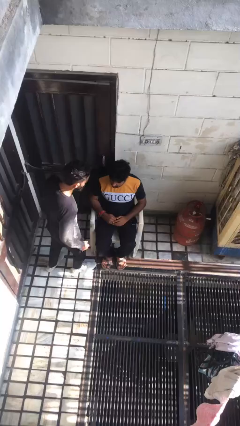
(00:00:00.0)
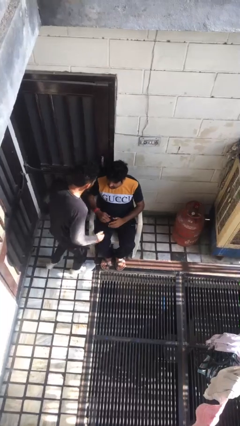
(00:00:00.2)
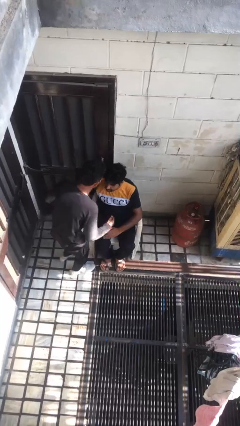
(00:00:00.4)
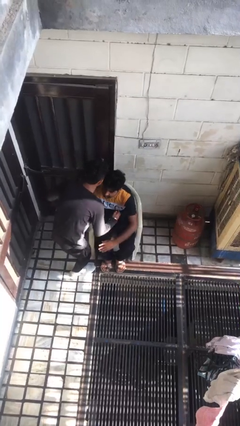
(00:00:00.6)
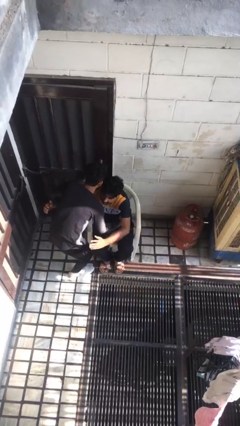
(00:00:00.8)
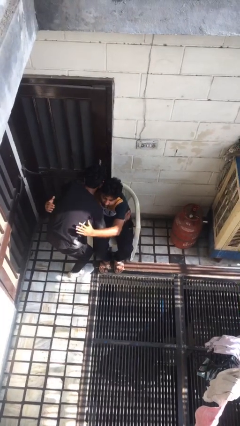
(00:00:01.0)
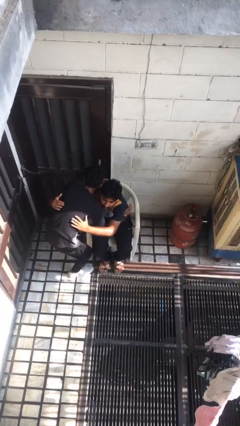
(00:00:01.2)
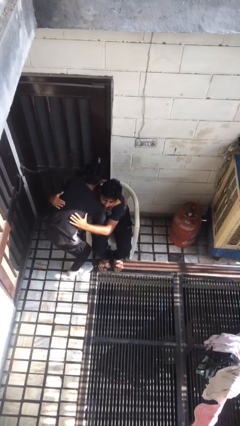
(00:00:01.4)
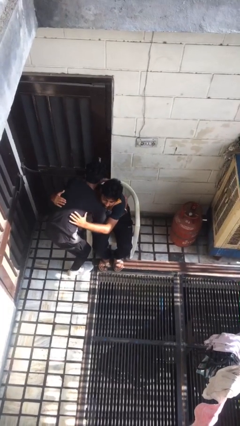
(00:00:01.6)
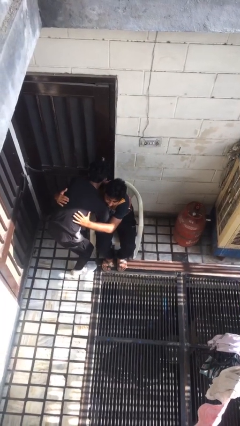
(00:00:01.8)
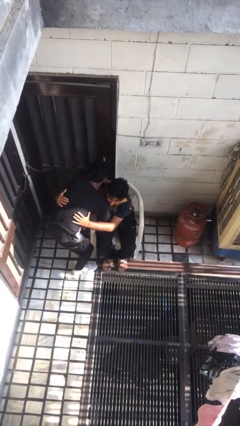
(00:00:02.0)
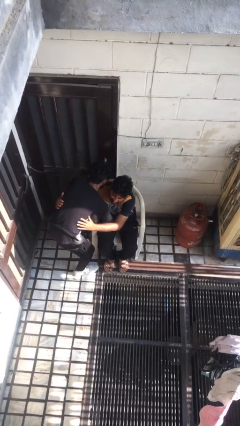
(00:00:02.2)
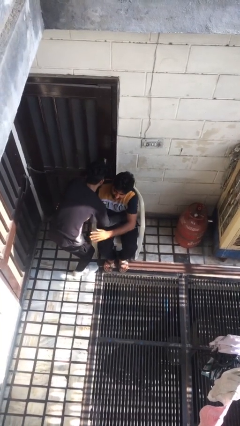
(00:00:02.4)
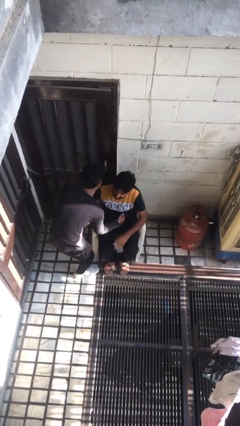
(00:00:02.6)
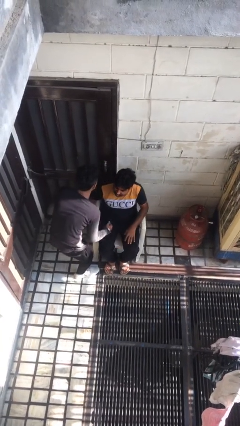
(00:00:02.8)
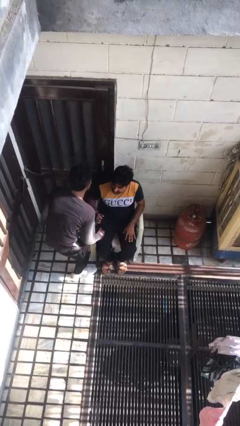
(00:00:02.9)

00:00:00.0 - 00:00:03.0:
person embraces person

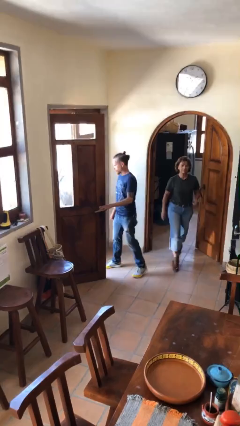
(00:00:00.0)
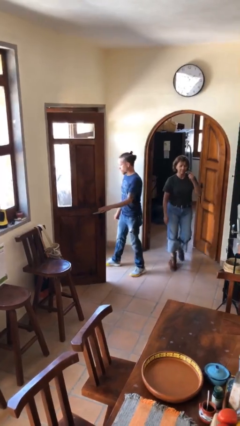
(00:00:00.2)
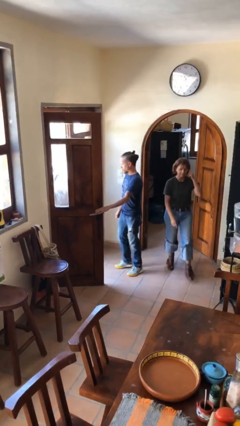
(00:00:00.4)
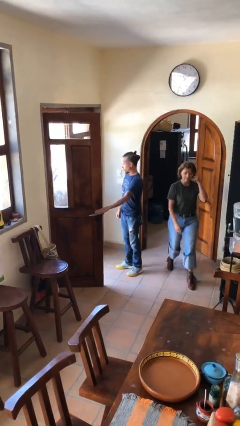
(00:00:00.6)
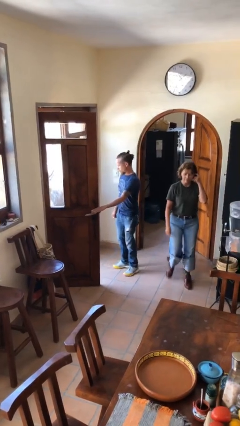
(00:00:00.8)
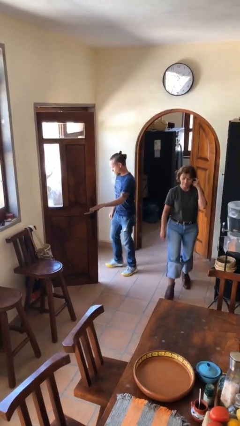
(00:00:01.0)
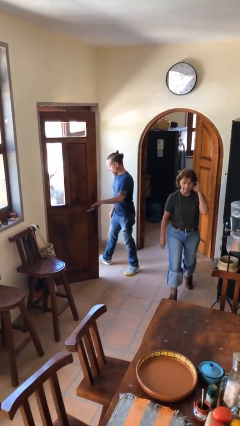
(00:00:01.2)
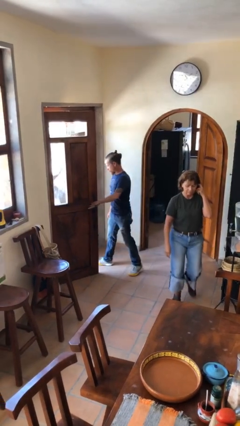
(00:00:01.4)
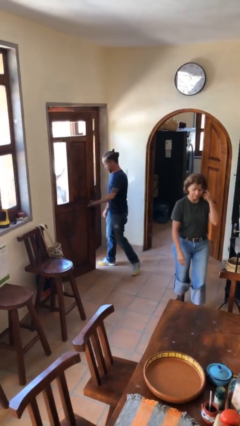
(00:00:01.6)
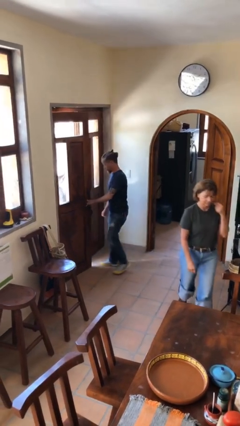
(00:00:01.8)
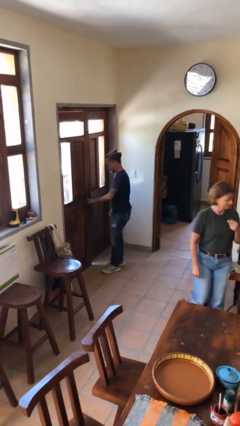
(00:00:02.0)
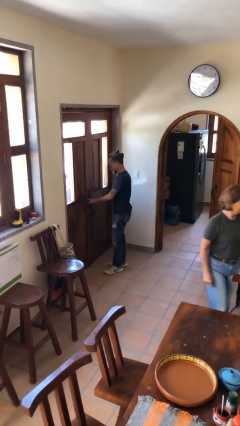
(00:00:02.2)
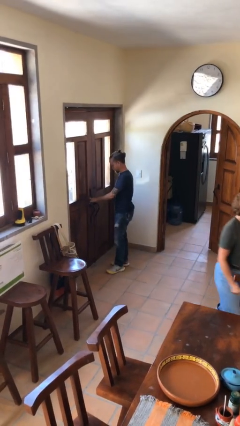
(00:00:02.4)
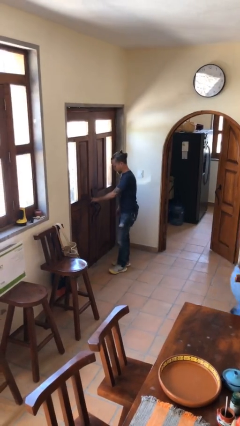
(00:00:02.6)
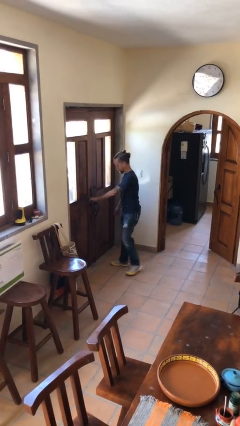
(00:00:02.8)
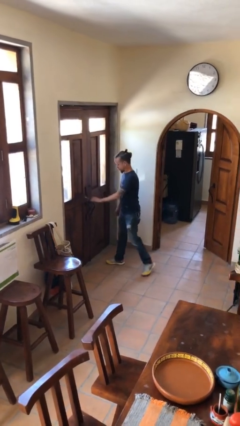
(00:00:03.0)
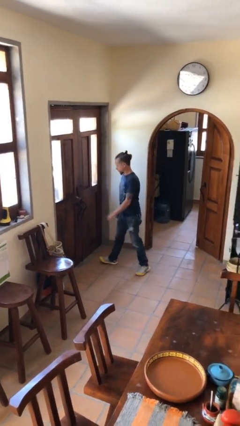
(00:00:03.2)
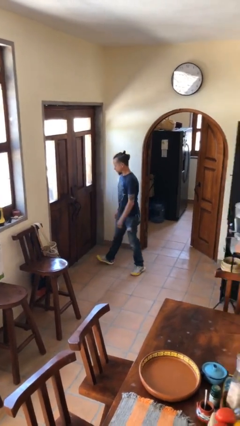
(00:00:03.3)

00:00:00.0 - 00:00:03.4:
person closes facility door

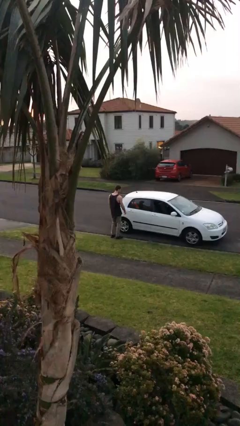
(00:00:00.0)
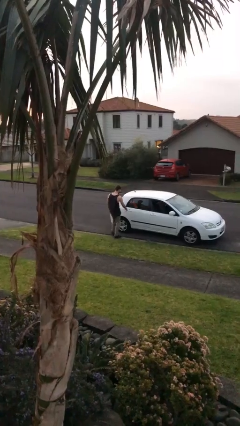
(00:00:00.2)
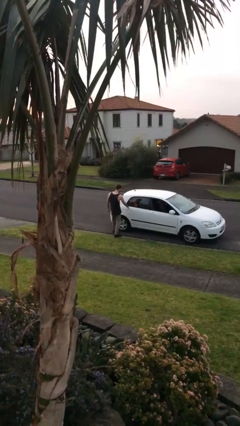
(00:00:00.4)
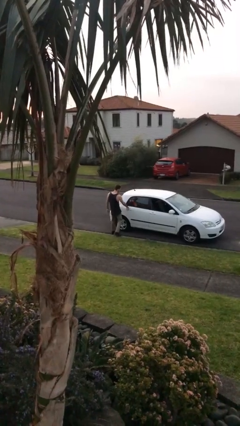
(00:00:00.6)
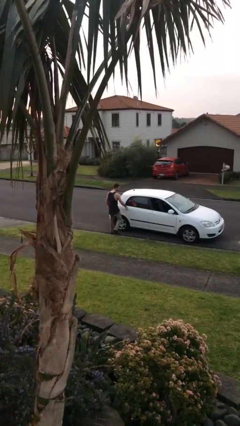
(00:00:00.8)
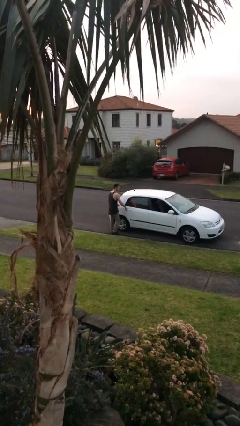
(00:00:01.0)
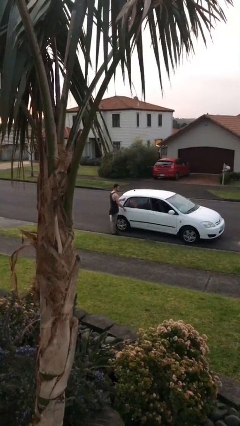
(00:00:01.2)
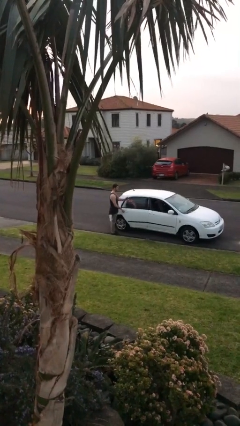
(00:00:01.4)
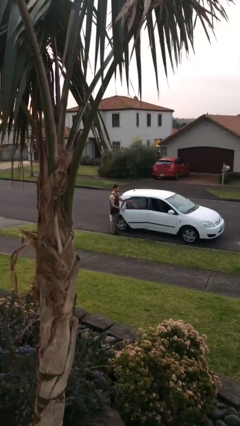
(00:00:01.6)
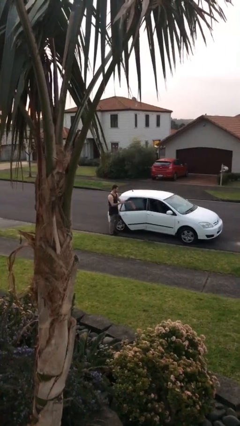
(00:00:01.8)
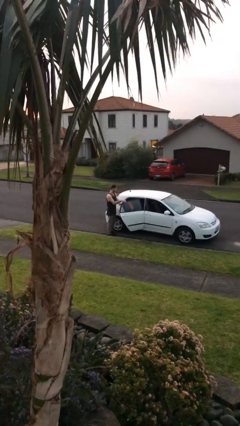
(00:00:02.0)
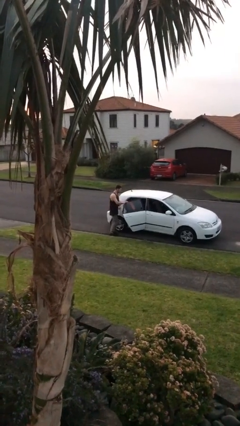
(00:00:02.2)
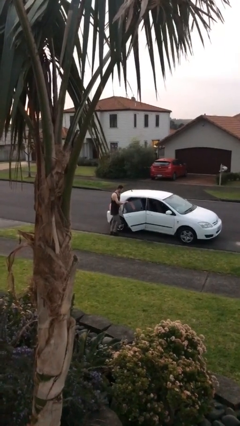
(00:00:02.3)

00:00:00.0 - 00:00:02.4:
person opens car door

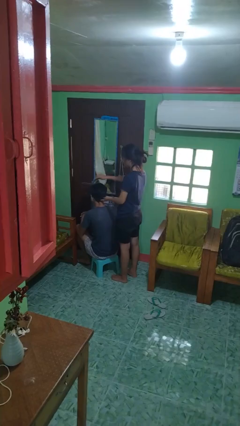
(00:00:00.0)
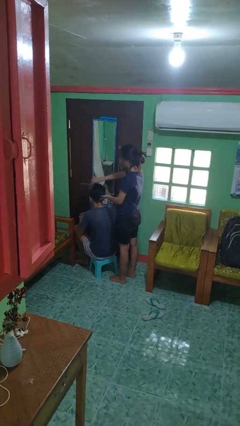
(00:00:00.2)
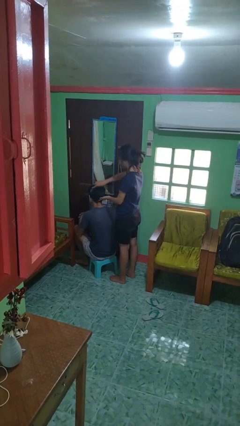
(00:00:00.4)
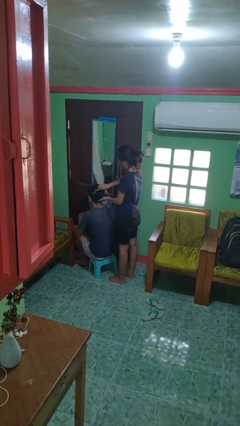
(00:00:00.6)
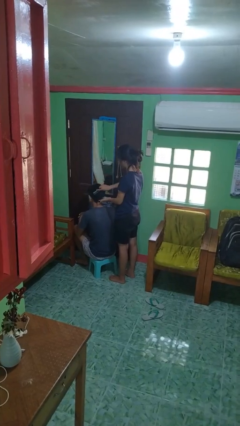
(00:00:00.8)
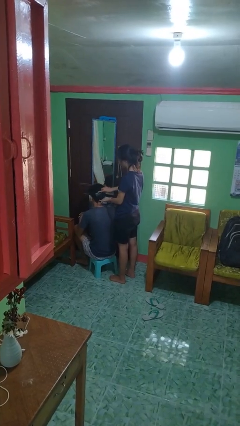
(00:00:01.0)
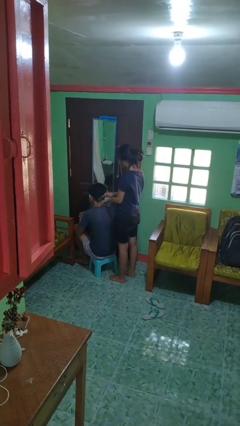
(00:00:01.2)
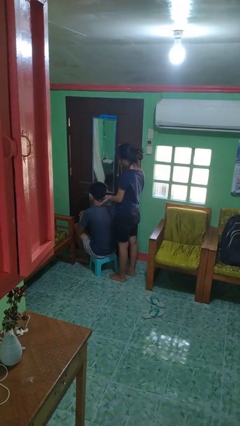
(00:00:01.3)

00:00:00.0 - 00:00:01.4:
person brushes hair of person

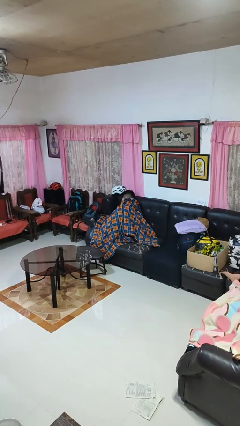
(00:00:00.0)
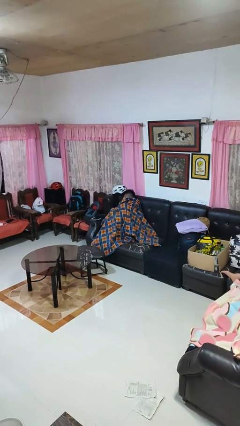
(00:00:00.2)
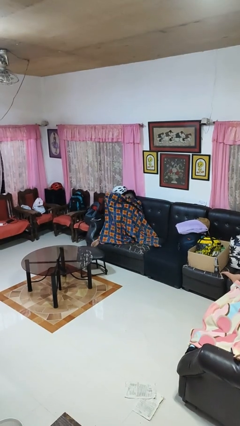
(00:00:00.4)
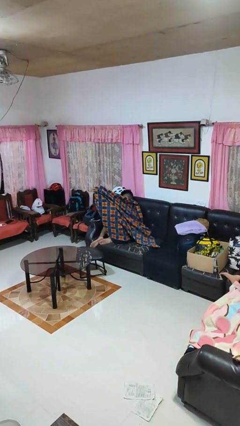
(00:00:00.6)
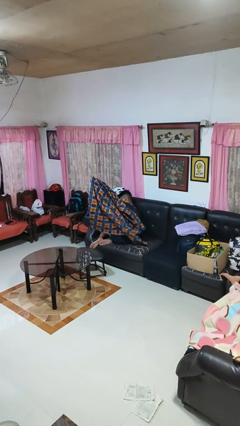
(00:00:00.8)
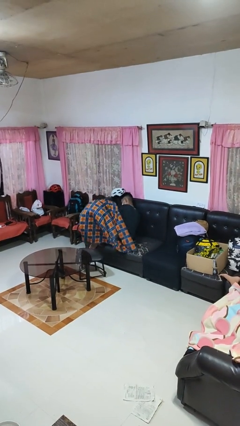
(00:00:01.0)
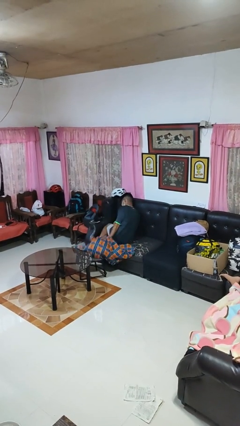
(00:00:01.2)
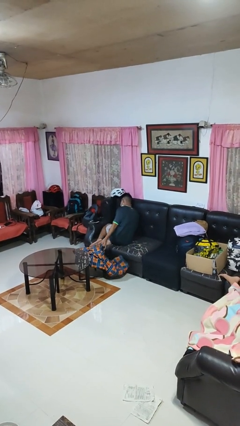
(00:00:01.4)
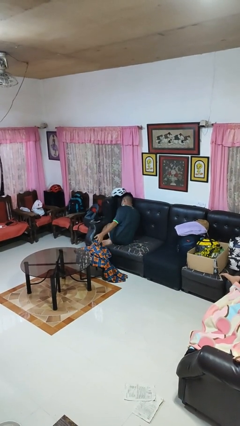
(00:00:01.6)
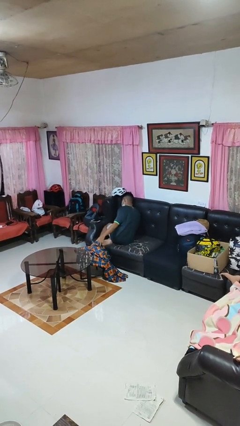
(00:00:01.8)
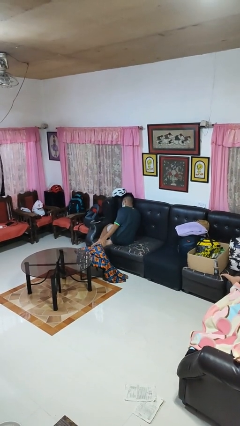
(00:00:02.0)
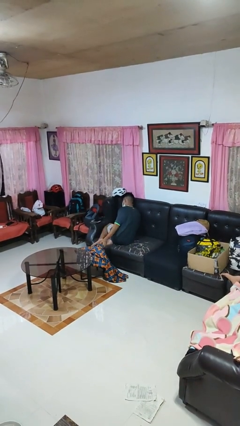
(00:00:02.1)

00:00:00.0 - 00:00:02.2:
person uncovers with blanket

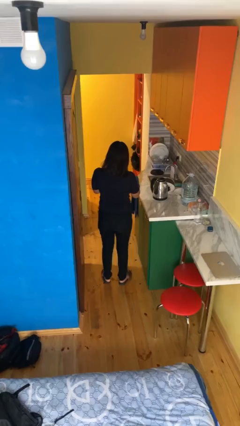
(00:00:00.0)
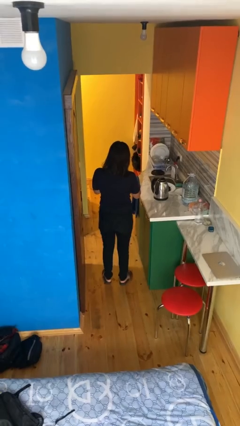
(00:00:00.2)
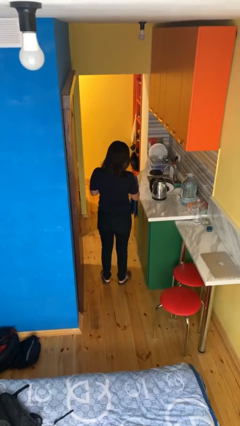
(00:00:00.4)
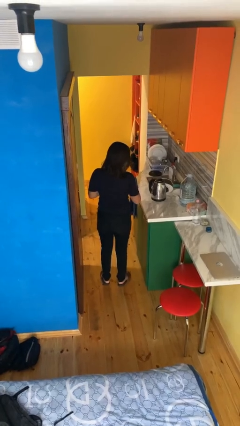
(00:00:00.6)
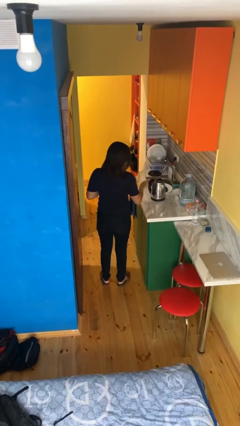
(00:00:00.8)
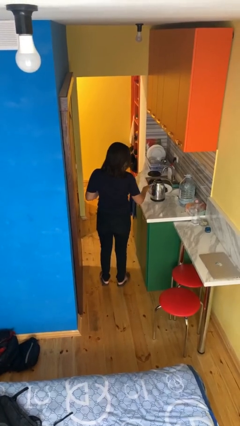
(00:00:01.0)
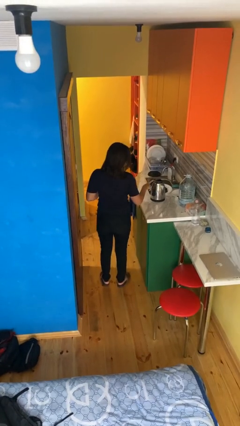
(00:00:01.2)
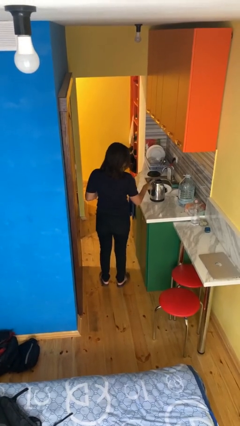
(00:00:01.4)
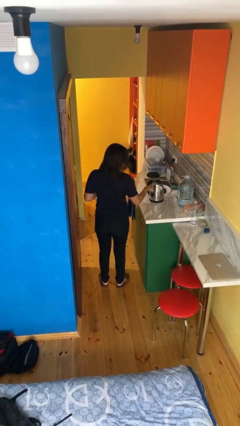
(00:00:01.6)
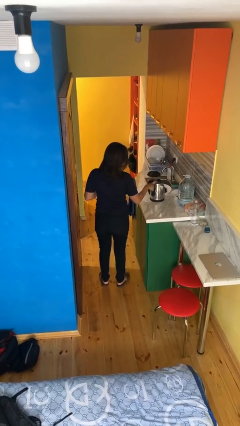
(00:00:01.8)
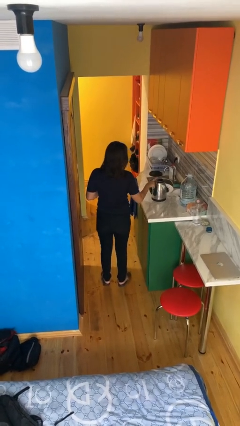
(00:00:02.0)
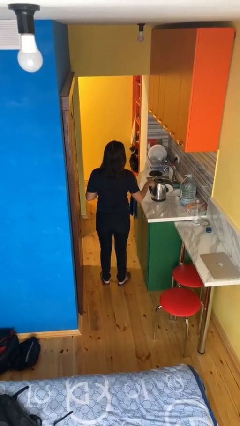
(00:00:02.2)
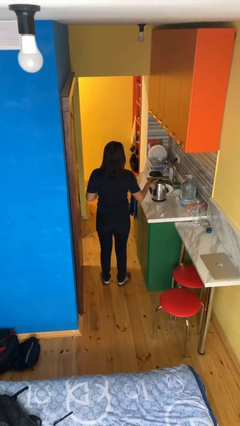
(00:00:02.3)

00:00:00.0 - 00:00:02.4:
person taps object with finger

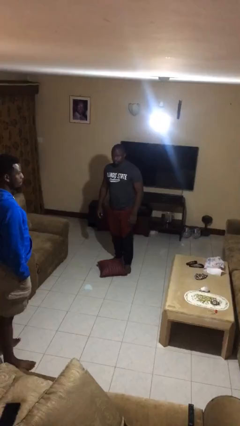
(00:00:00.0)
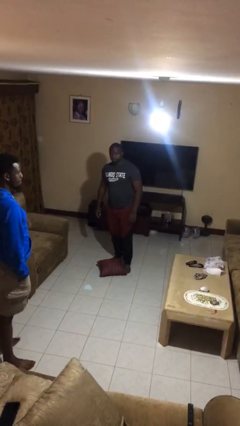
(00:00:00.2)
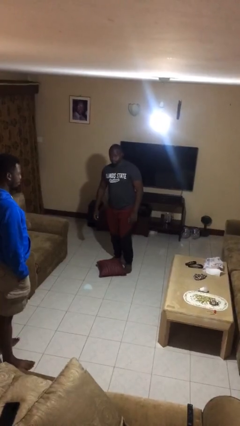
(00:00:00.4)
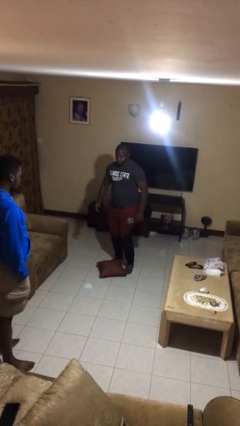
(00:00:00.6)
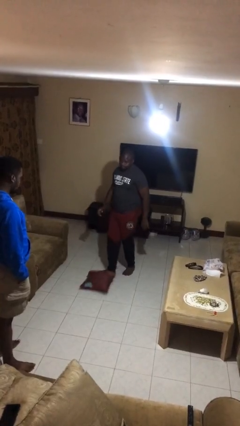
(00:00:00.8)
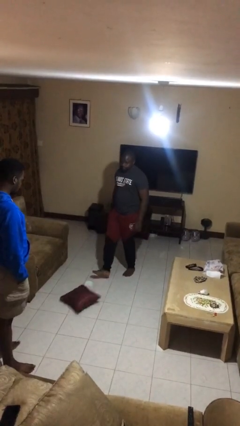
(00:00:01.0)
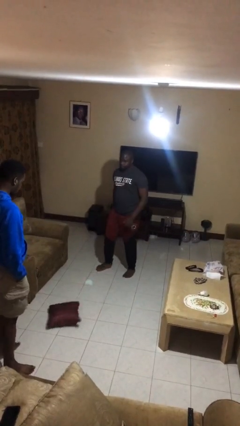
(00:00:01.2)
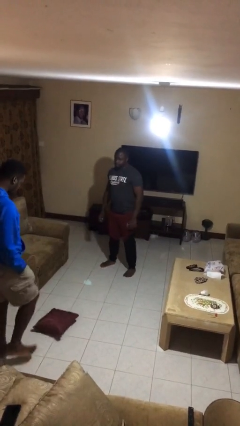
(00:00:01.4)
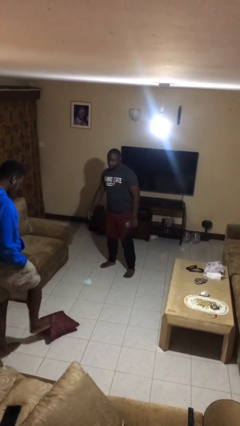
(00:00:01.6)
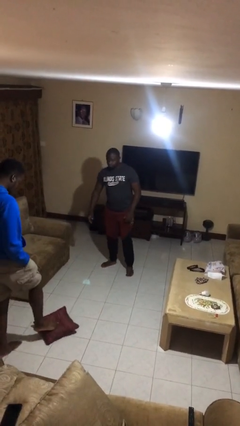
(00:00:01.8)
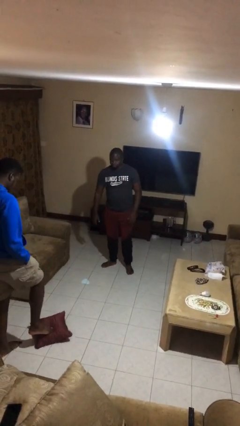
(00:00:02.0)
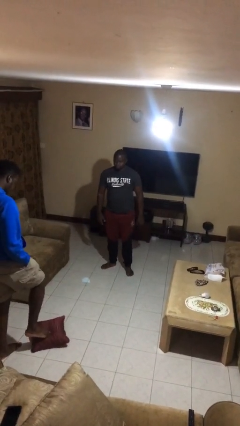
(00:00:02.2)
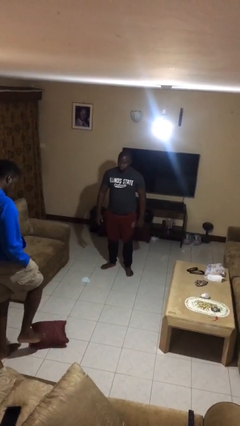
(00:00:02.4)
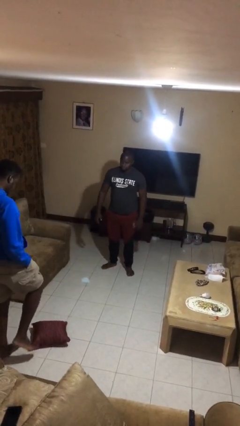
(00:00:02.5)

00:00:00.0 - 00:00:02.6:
person kicks object to person
